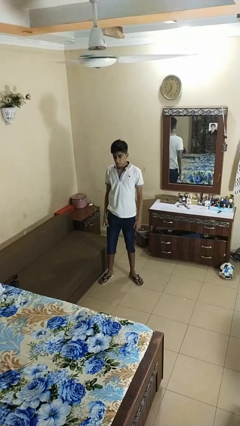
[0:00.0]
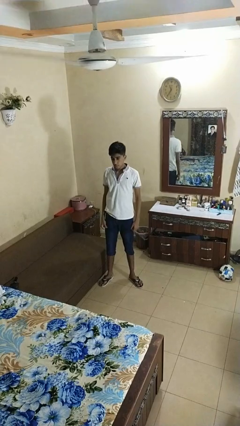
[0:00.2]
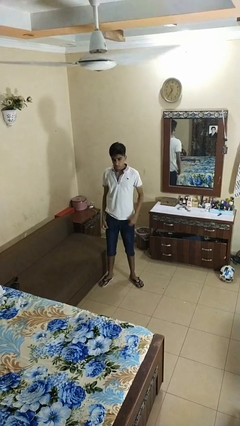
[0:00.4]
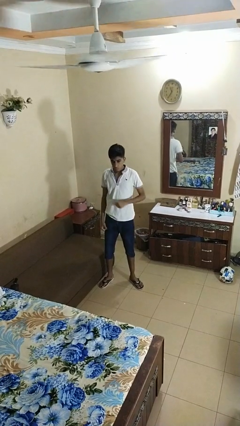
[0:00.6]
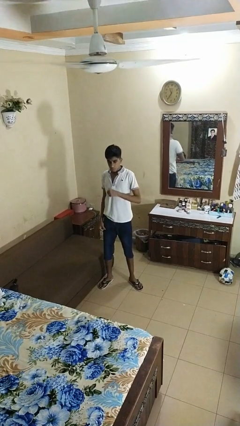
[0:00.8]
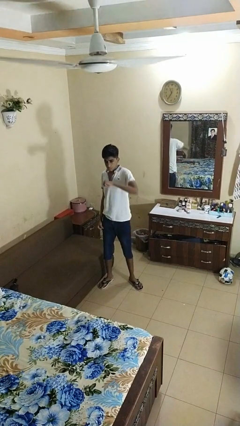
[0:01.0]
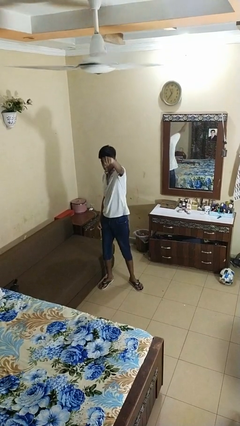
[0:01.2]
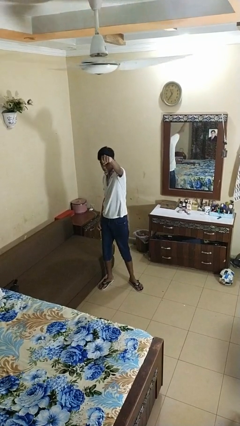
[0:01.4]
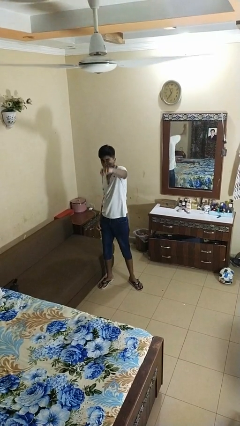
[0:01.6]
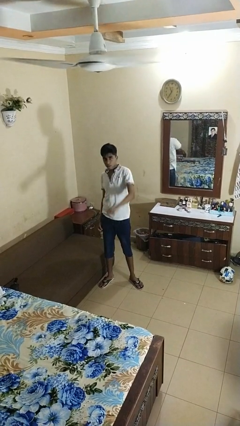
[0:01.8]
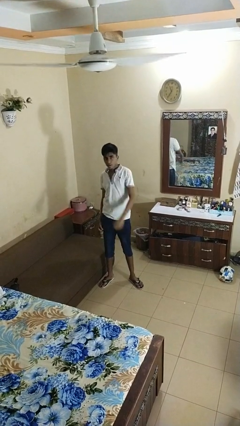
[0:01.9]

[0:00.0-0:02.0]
person punches

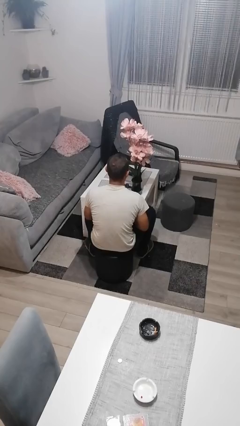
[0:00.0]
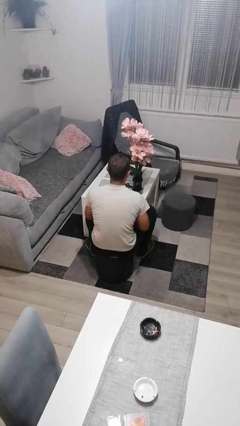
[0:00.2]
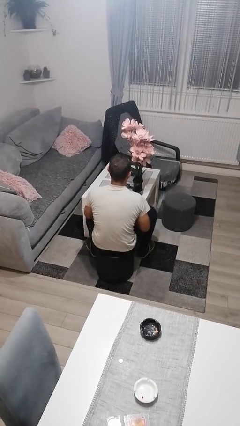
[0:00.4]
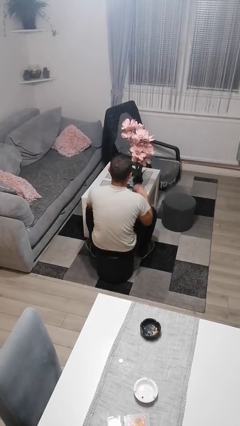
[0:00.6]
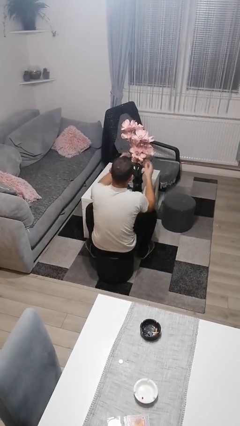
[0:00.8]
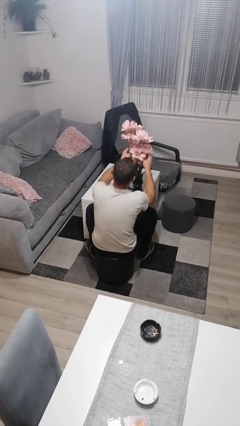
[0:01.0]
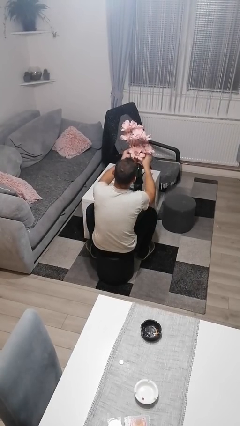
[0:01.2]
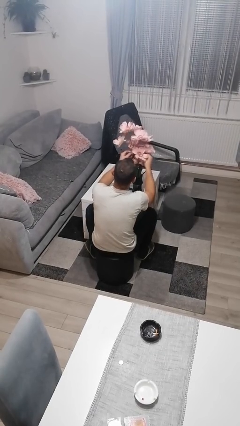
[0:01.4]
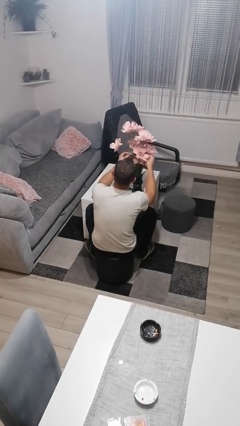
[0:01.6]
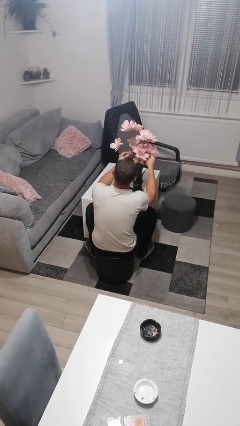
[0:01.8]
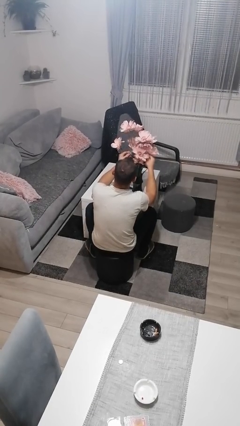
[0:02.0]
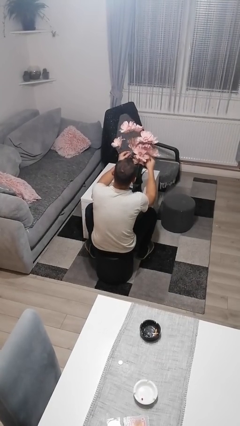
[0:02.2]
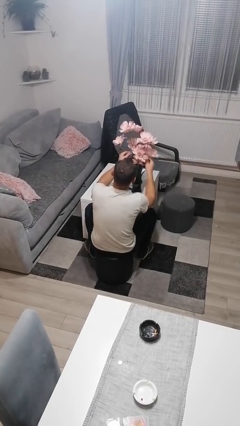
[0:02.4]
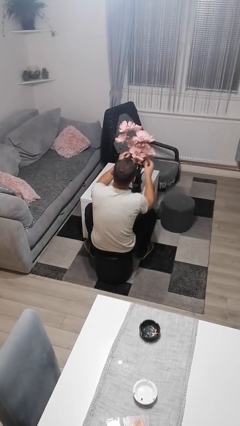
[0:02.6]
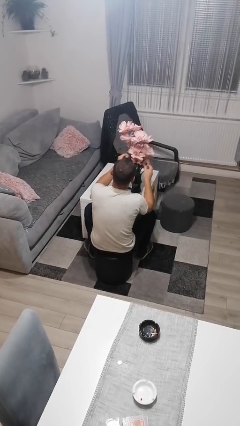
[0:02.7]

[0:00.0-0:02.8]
person arranges flowers in vase

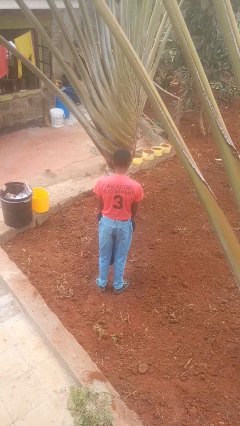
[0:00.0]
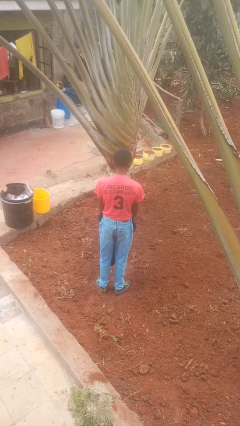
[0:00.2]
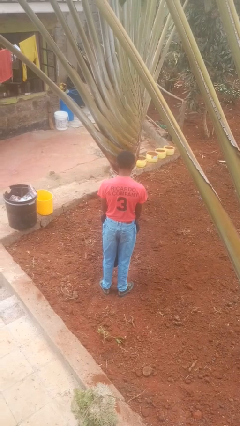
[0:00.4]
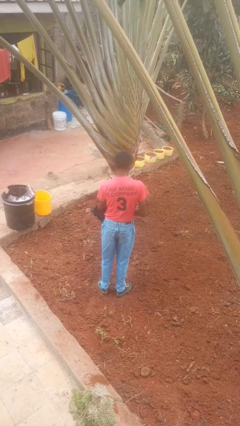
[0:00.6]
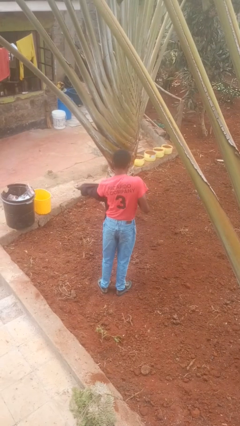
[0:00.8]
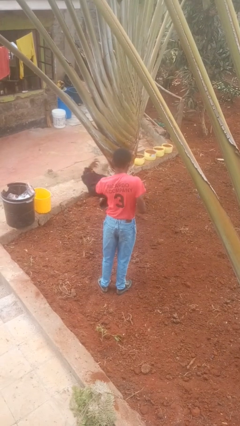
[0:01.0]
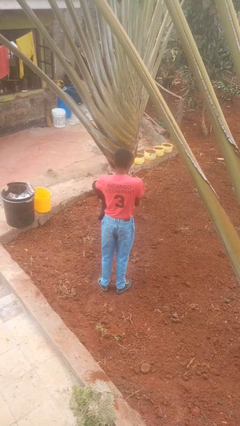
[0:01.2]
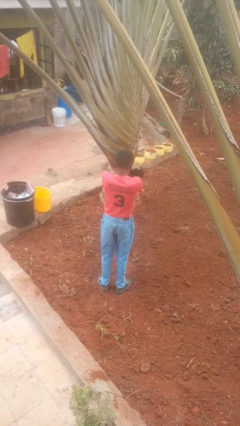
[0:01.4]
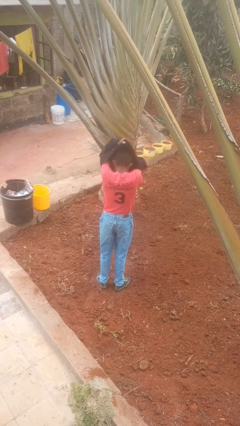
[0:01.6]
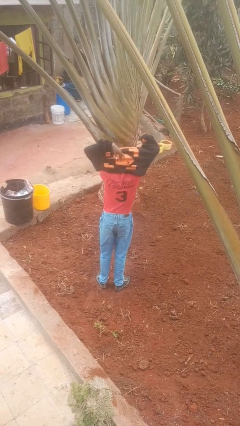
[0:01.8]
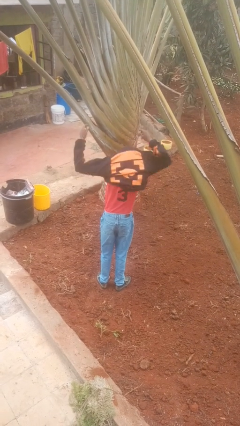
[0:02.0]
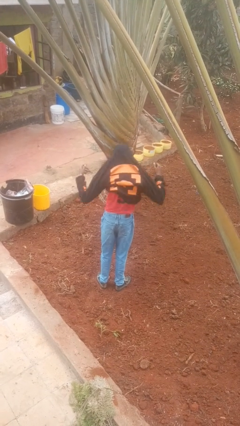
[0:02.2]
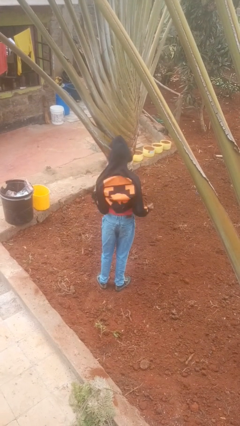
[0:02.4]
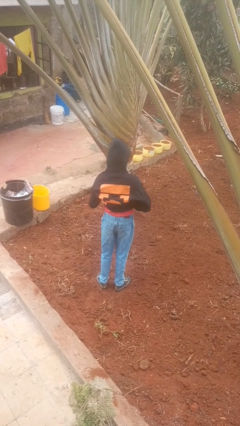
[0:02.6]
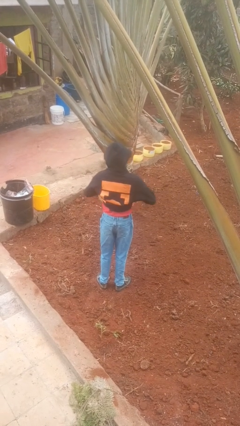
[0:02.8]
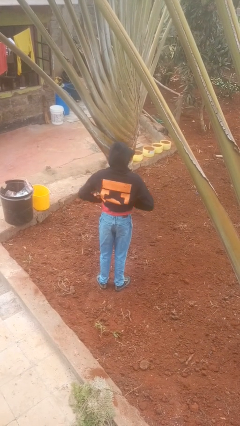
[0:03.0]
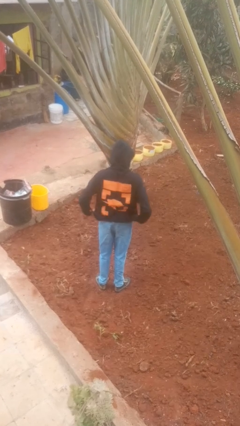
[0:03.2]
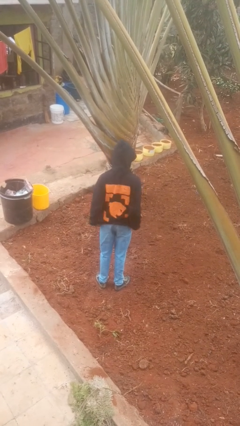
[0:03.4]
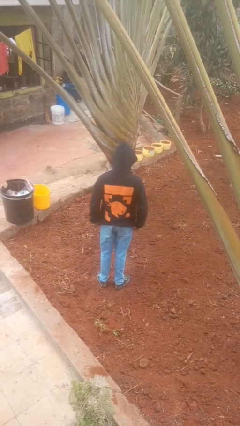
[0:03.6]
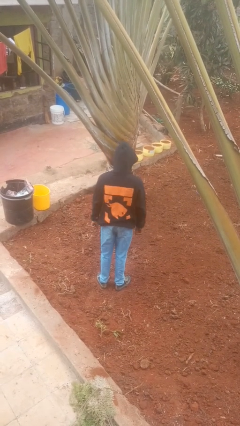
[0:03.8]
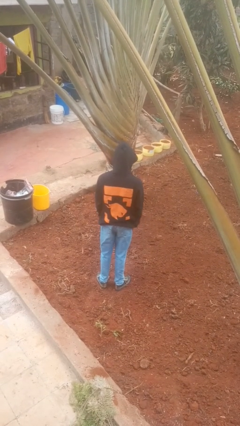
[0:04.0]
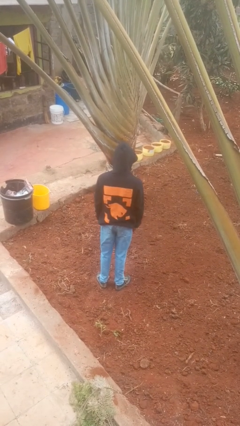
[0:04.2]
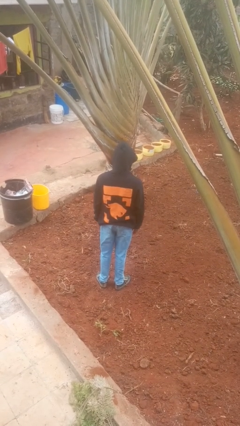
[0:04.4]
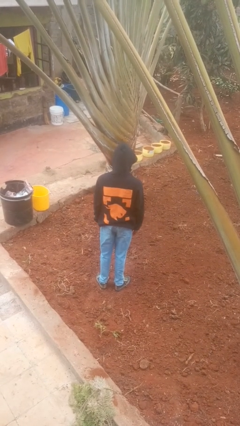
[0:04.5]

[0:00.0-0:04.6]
person puts on hoodie

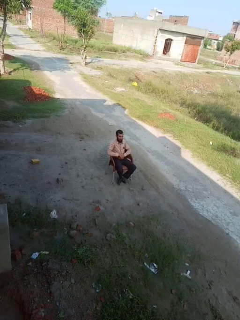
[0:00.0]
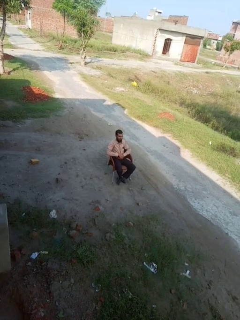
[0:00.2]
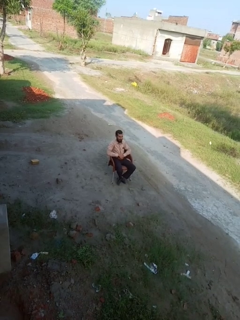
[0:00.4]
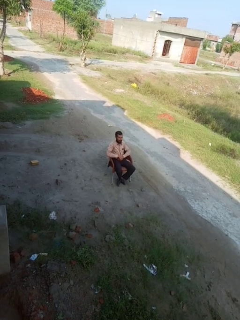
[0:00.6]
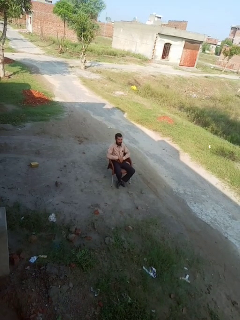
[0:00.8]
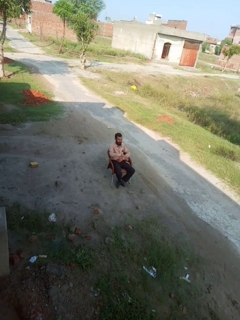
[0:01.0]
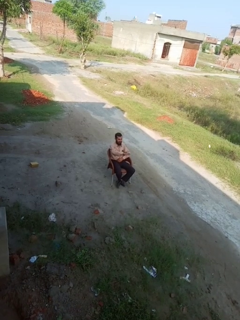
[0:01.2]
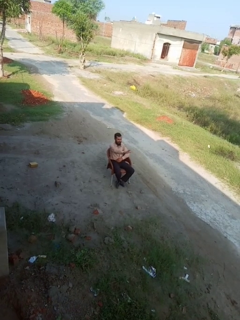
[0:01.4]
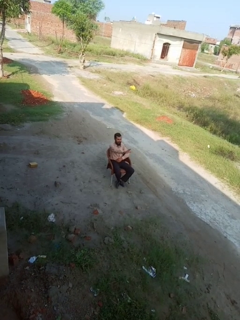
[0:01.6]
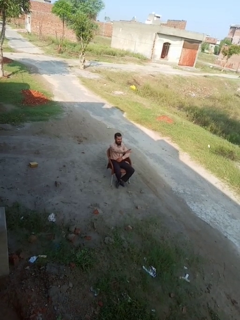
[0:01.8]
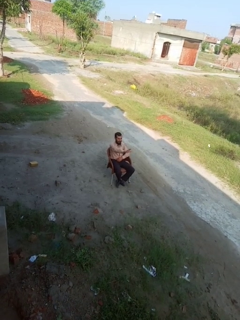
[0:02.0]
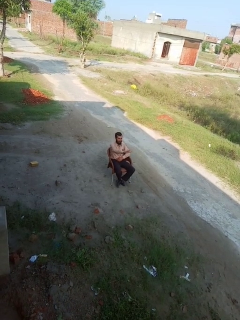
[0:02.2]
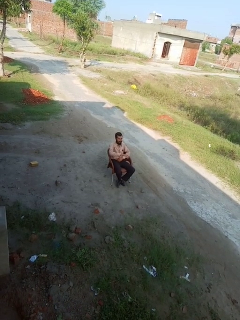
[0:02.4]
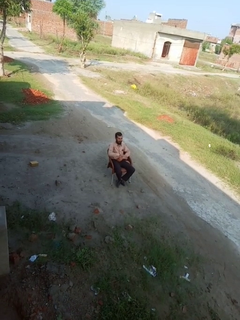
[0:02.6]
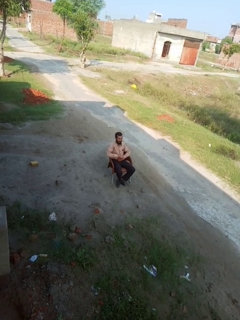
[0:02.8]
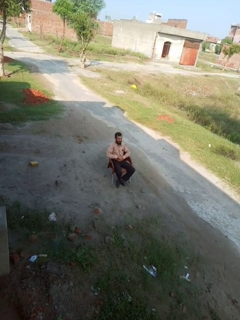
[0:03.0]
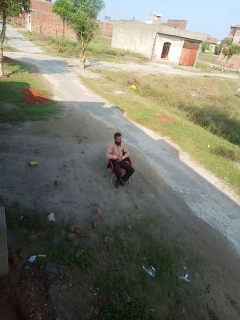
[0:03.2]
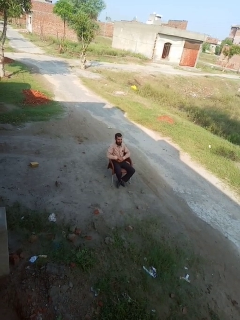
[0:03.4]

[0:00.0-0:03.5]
person gestures stop

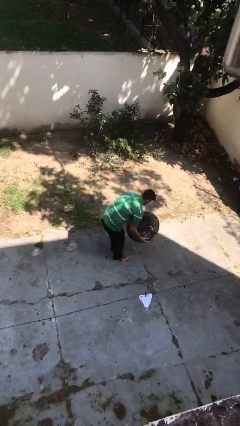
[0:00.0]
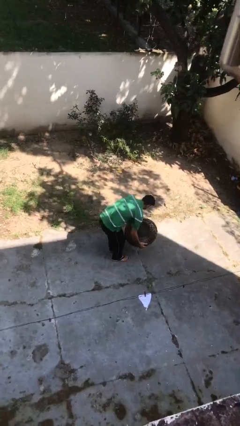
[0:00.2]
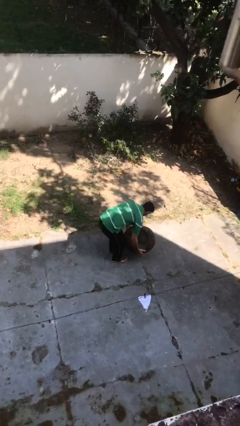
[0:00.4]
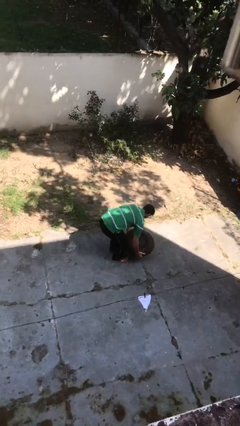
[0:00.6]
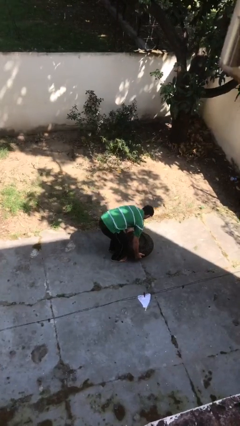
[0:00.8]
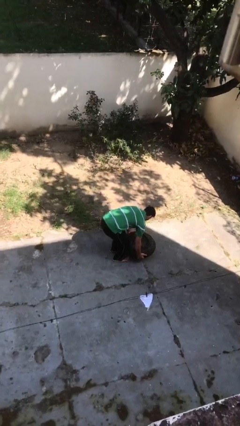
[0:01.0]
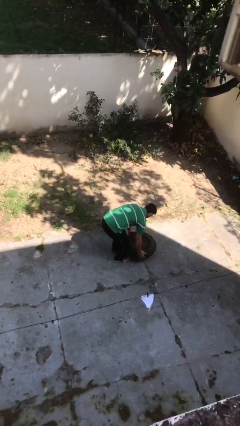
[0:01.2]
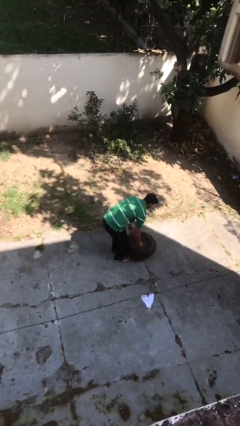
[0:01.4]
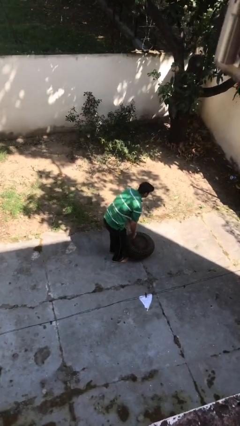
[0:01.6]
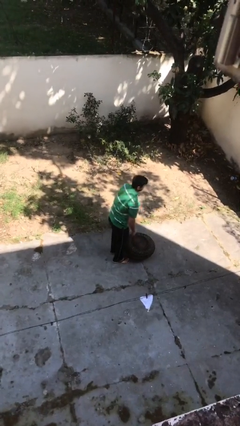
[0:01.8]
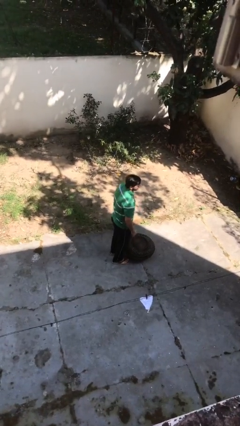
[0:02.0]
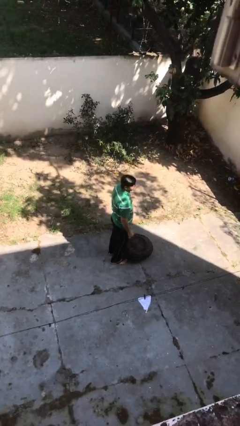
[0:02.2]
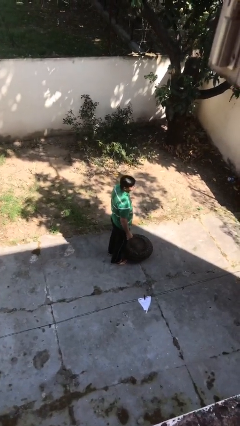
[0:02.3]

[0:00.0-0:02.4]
person puts down object on floor

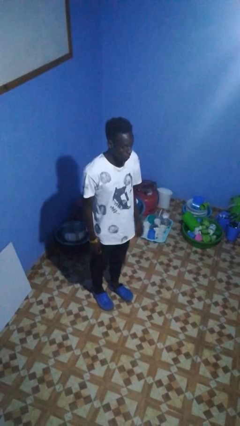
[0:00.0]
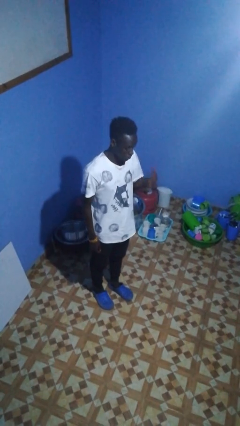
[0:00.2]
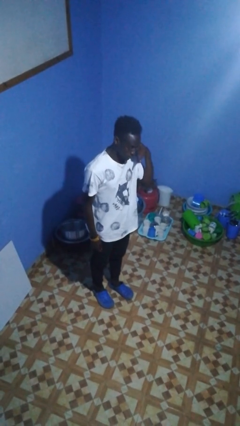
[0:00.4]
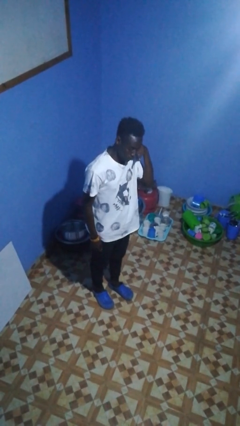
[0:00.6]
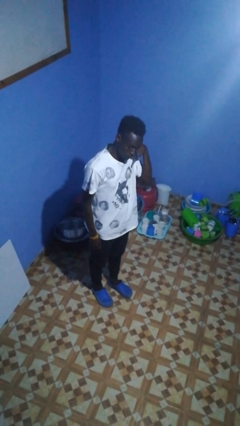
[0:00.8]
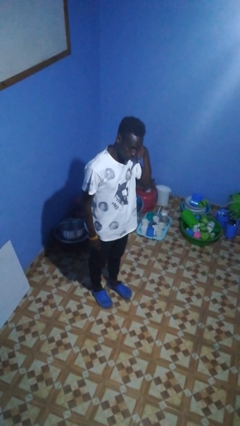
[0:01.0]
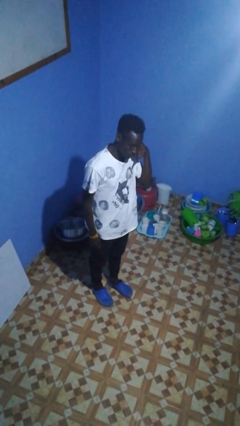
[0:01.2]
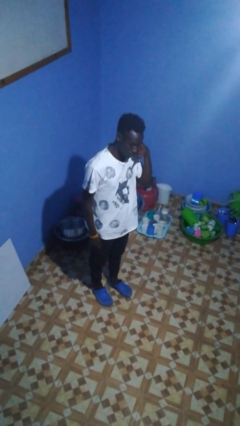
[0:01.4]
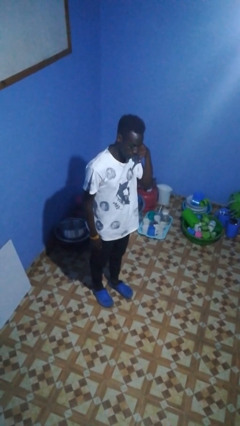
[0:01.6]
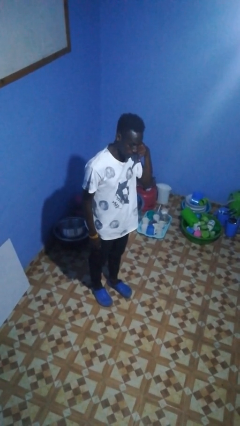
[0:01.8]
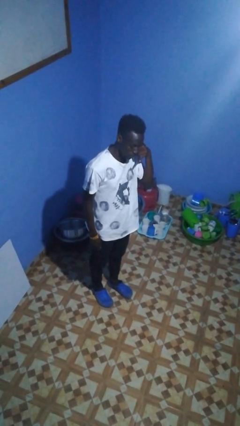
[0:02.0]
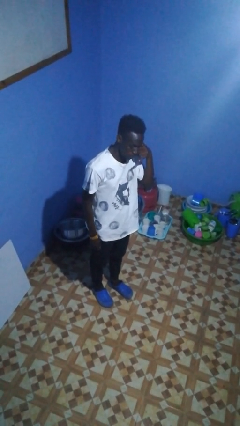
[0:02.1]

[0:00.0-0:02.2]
person gestures call me

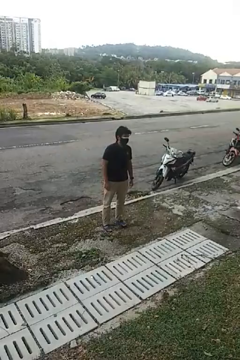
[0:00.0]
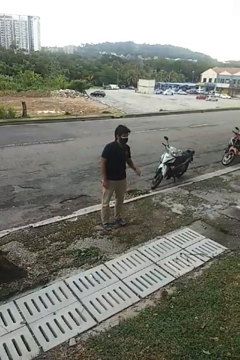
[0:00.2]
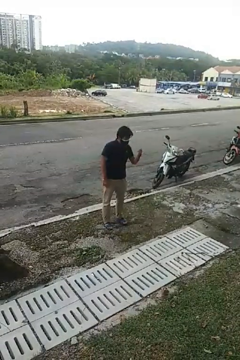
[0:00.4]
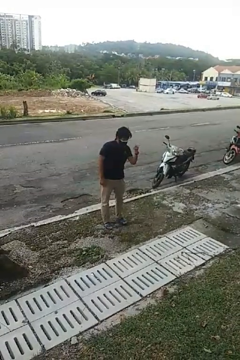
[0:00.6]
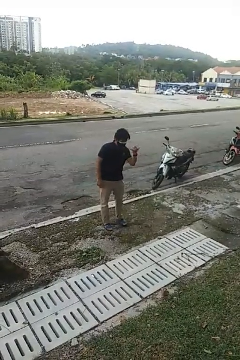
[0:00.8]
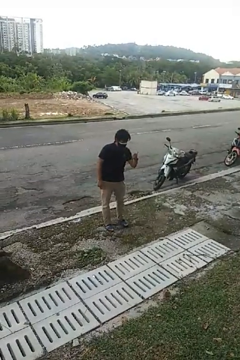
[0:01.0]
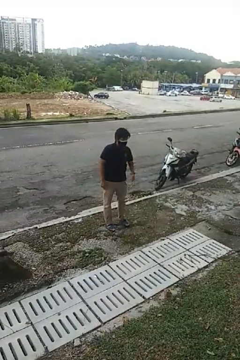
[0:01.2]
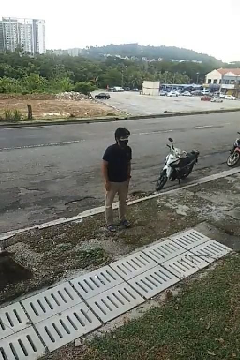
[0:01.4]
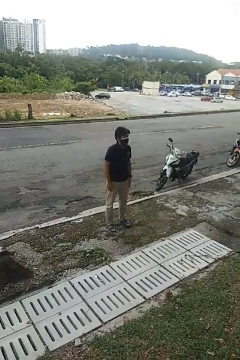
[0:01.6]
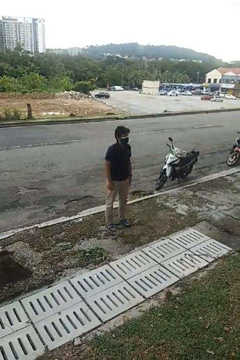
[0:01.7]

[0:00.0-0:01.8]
person gestures hang loose
